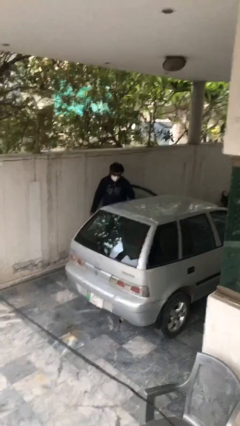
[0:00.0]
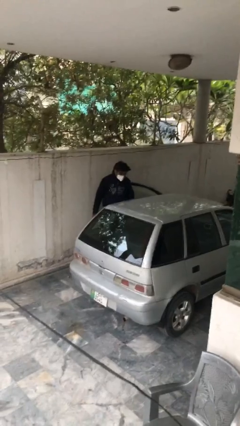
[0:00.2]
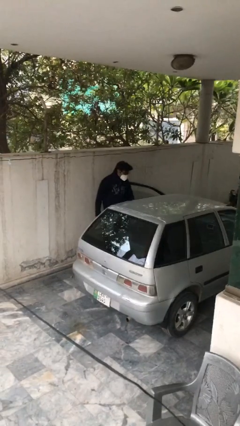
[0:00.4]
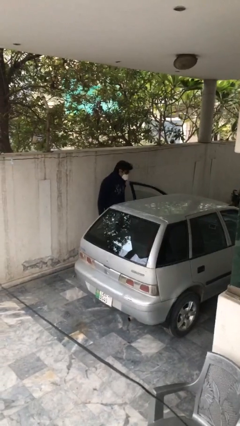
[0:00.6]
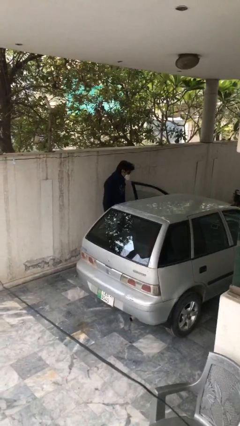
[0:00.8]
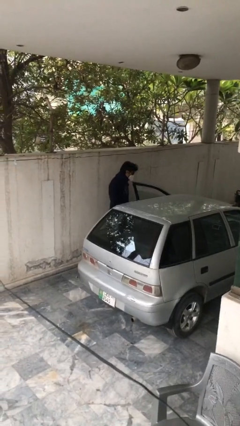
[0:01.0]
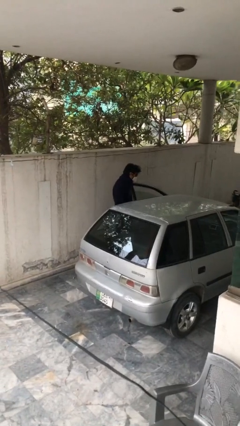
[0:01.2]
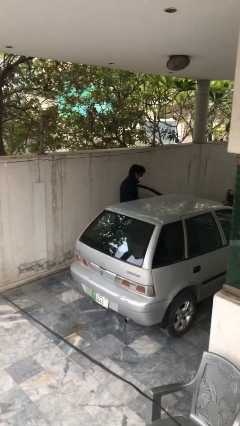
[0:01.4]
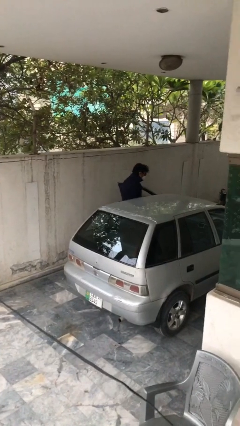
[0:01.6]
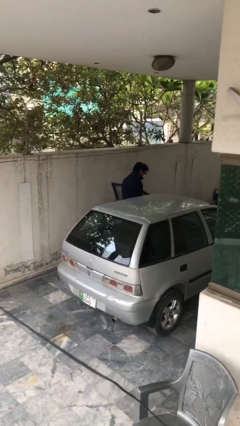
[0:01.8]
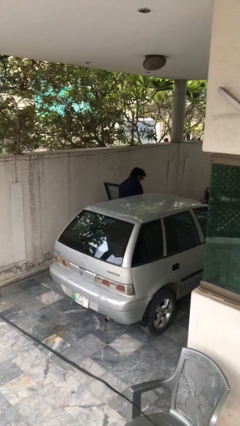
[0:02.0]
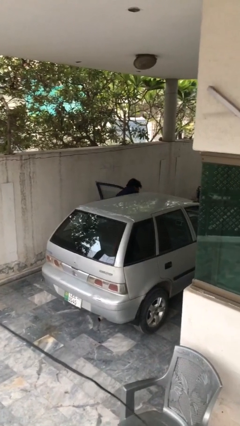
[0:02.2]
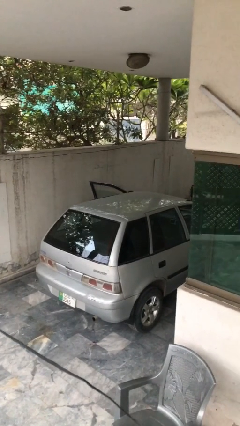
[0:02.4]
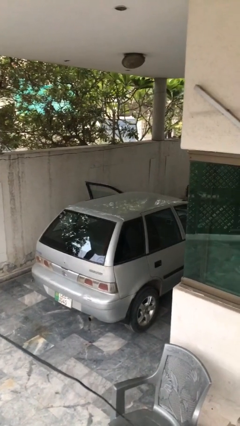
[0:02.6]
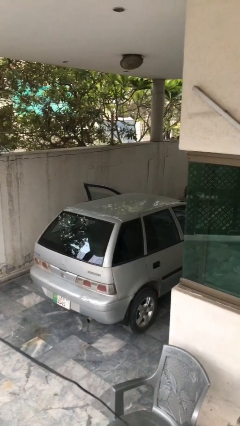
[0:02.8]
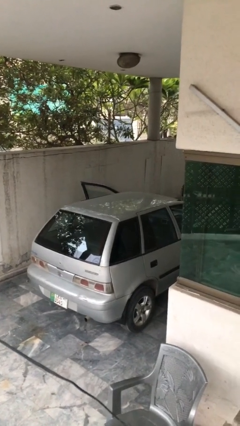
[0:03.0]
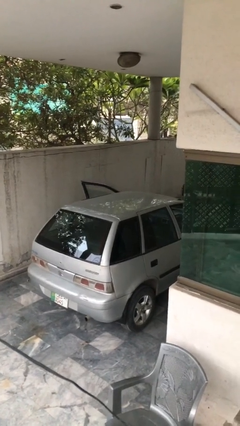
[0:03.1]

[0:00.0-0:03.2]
person enters car

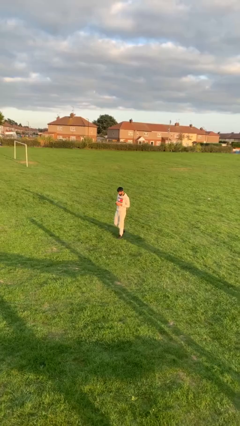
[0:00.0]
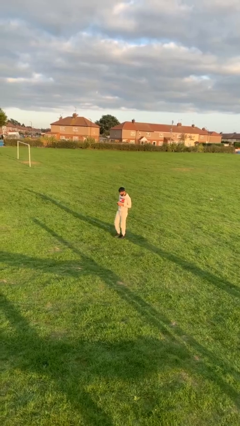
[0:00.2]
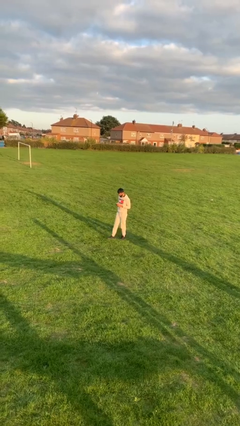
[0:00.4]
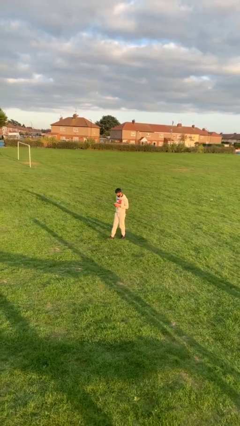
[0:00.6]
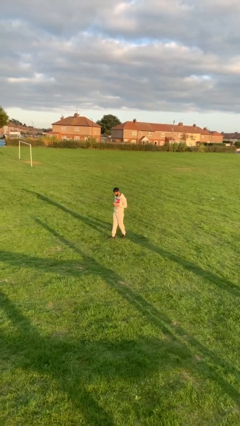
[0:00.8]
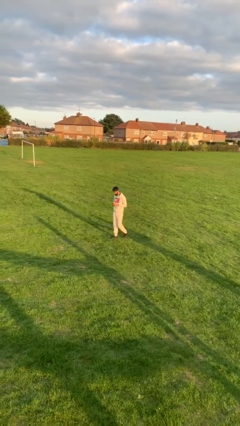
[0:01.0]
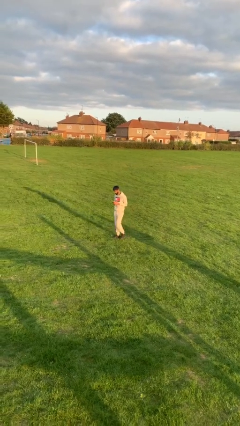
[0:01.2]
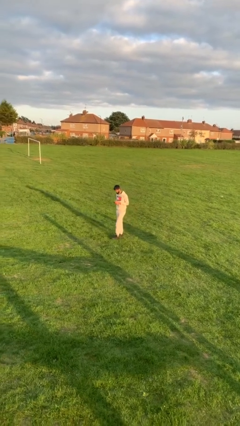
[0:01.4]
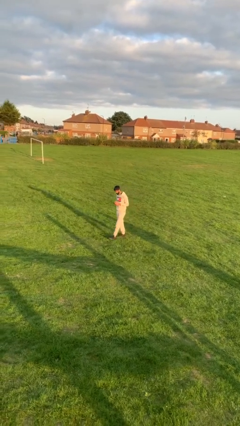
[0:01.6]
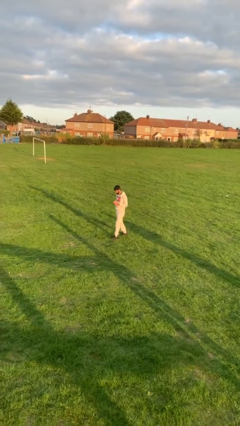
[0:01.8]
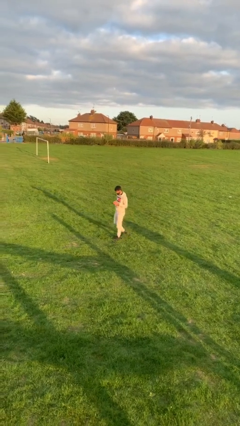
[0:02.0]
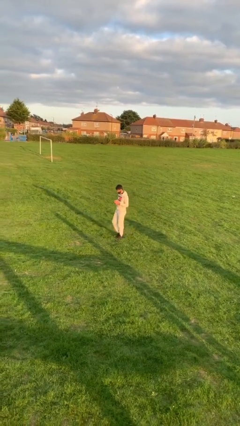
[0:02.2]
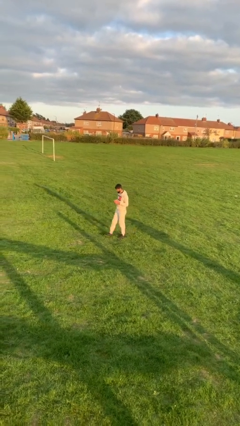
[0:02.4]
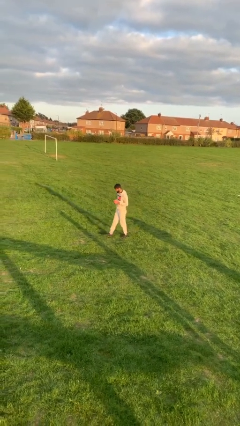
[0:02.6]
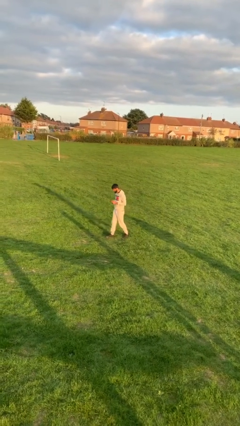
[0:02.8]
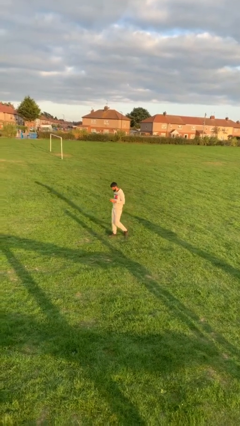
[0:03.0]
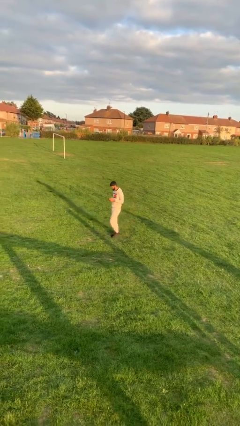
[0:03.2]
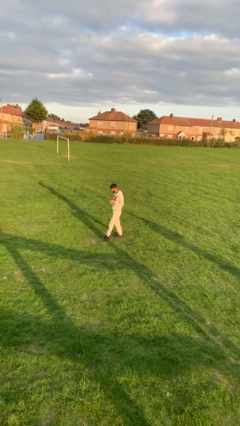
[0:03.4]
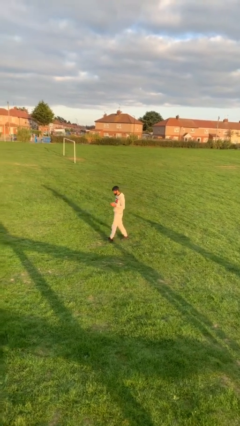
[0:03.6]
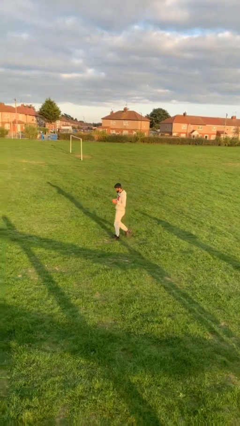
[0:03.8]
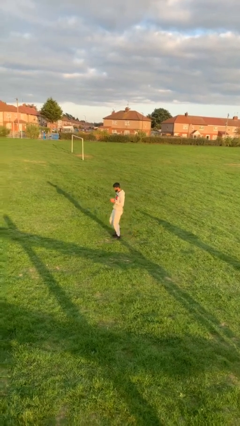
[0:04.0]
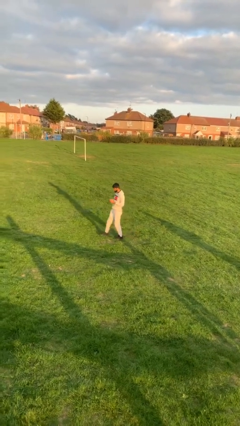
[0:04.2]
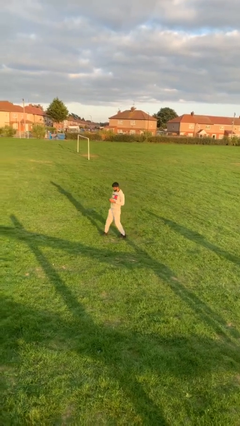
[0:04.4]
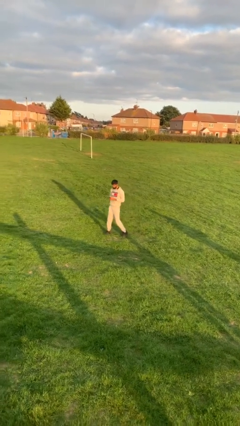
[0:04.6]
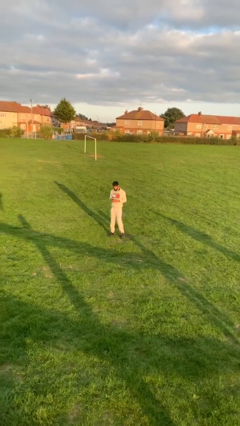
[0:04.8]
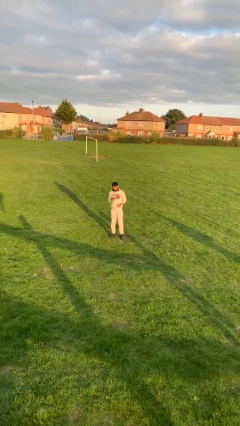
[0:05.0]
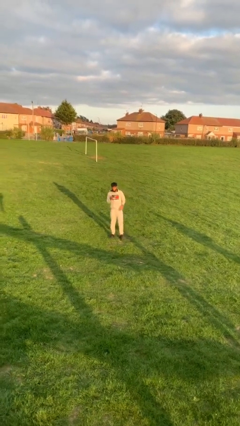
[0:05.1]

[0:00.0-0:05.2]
person texts on phone

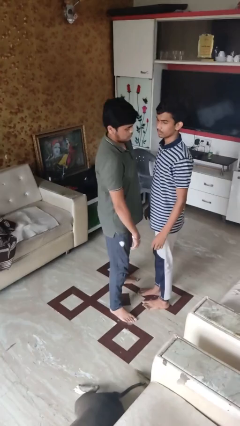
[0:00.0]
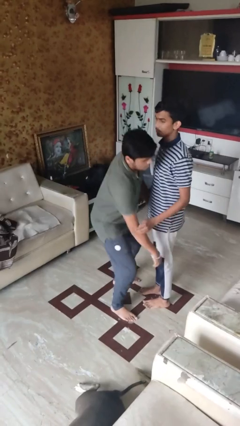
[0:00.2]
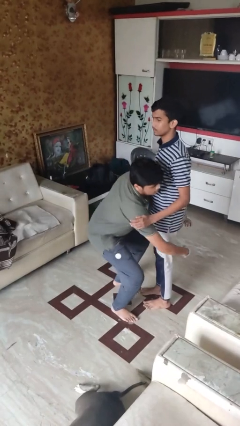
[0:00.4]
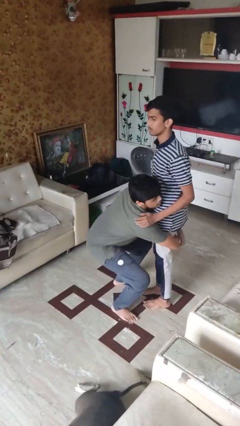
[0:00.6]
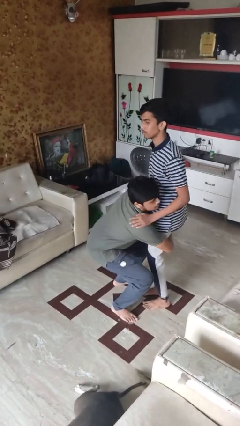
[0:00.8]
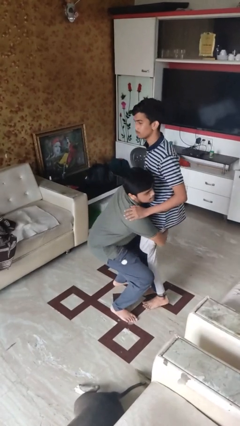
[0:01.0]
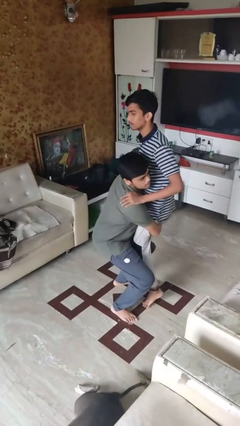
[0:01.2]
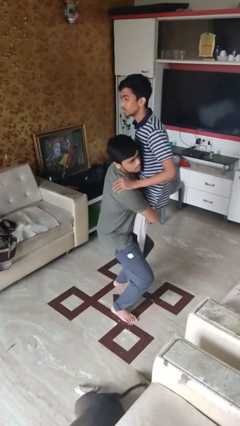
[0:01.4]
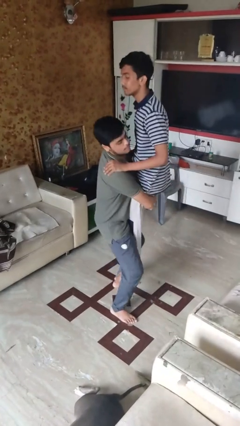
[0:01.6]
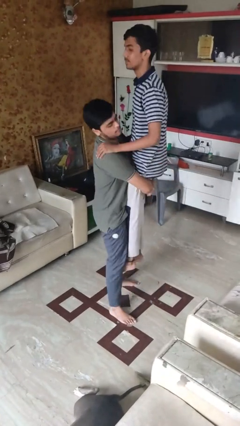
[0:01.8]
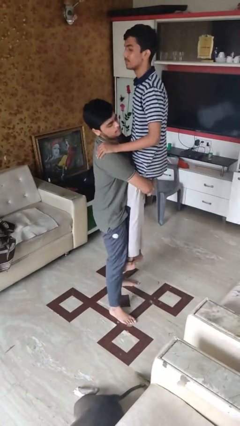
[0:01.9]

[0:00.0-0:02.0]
person picks up person

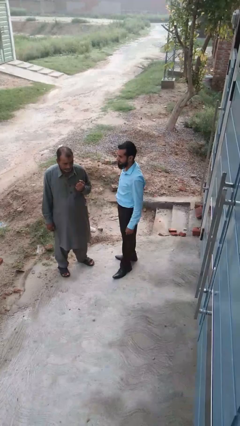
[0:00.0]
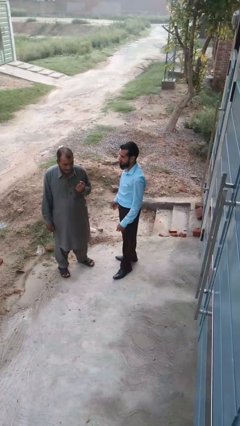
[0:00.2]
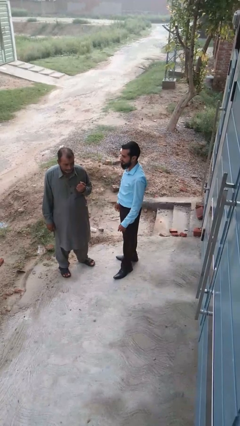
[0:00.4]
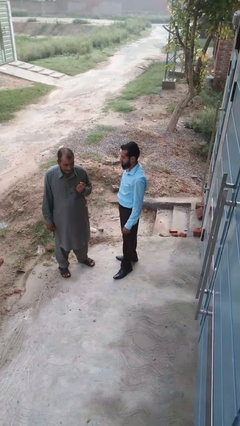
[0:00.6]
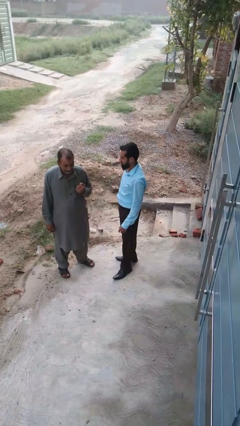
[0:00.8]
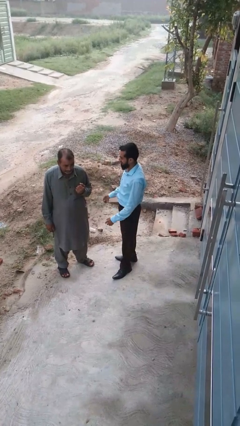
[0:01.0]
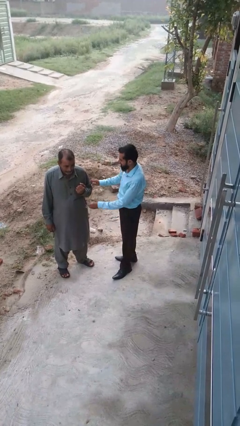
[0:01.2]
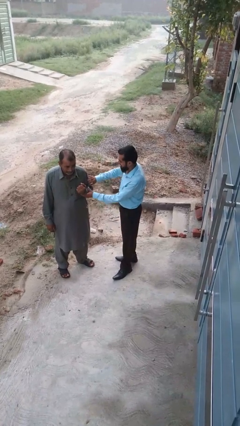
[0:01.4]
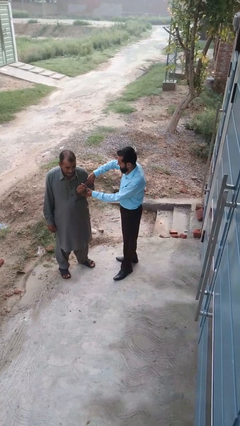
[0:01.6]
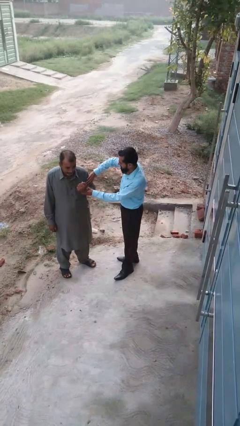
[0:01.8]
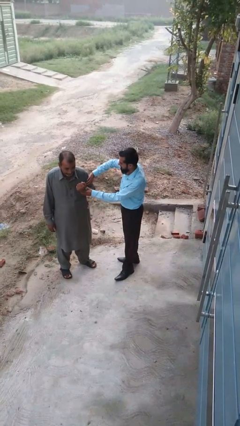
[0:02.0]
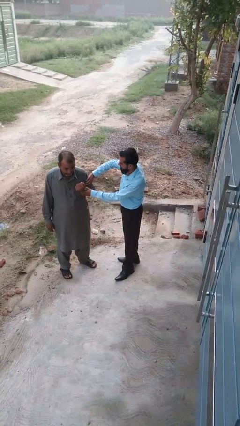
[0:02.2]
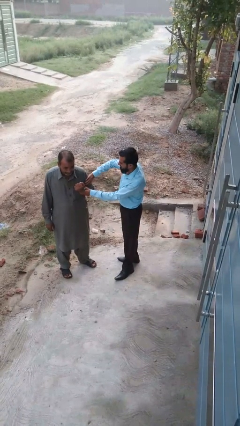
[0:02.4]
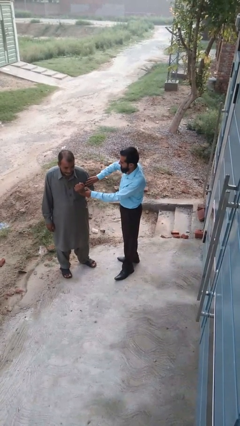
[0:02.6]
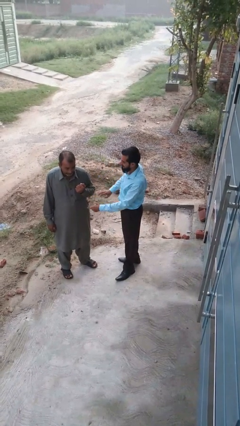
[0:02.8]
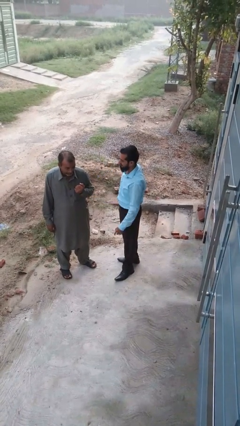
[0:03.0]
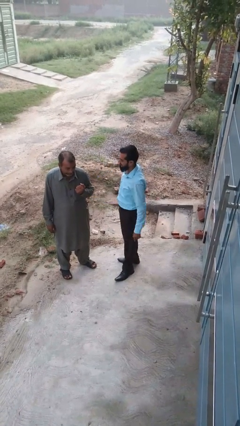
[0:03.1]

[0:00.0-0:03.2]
person grabs person by bicep

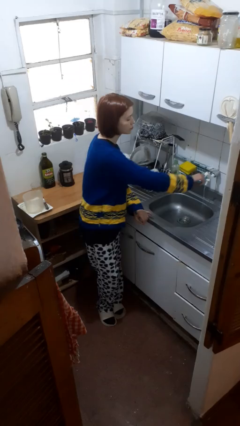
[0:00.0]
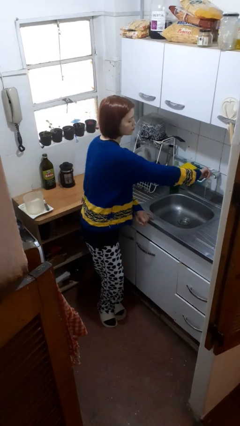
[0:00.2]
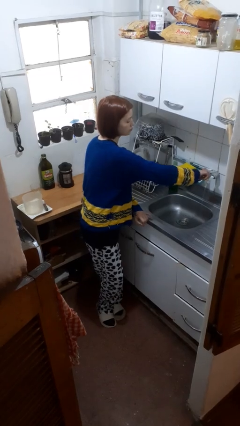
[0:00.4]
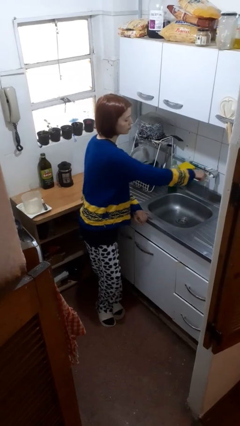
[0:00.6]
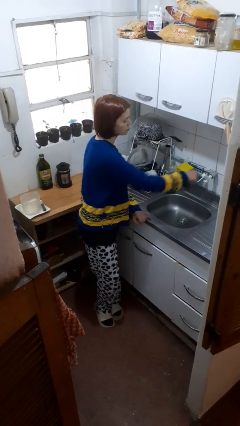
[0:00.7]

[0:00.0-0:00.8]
person turns off faucet

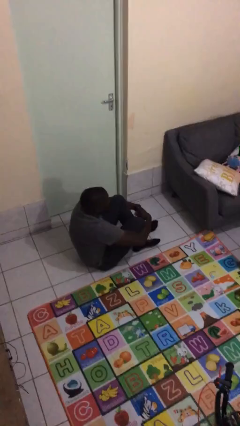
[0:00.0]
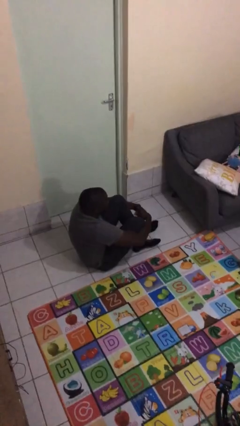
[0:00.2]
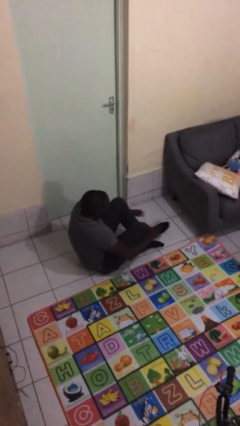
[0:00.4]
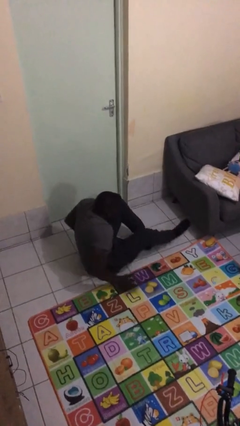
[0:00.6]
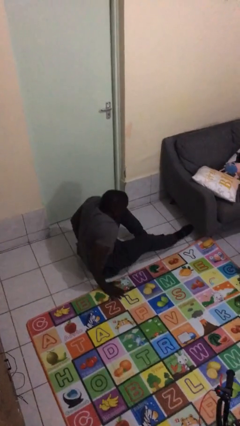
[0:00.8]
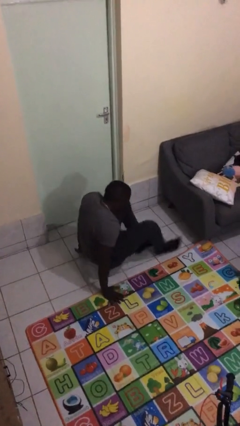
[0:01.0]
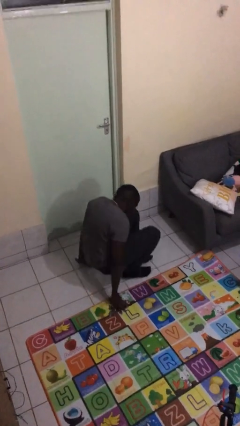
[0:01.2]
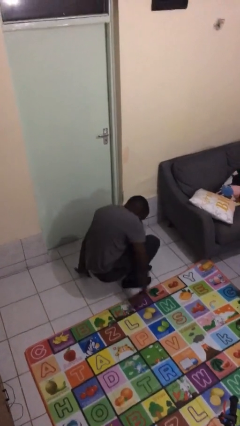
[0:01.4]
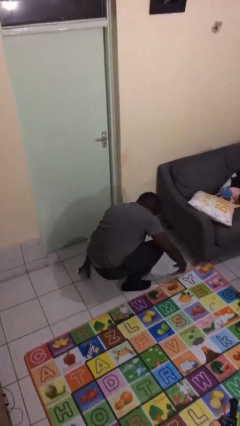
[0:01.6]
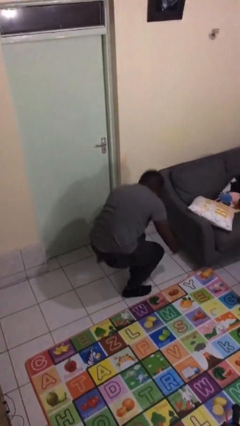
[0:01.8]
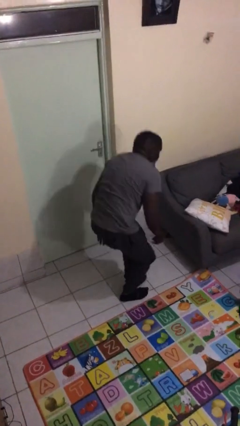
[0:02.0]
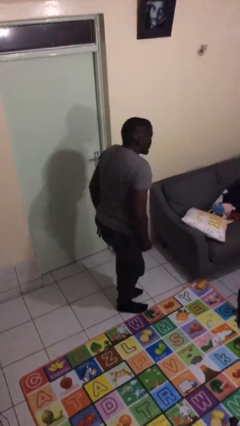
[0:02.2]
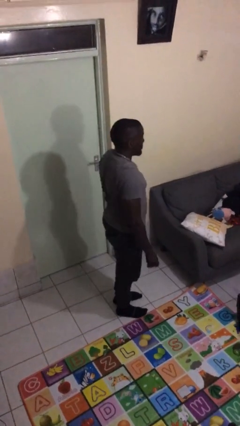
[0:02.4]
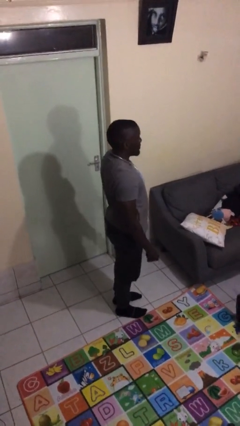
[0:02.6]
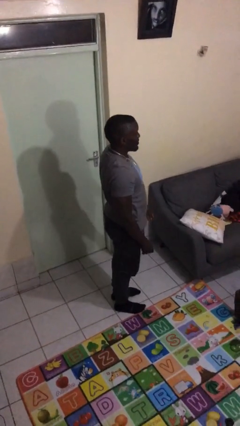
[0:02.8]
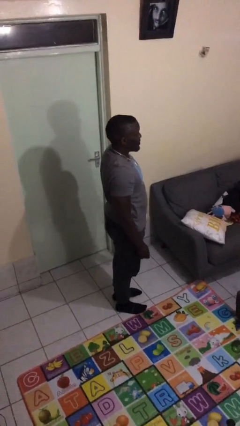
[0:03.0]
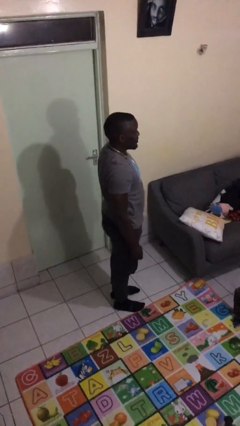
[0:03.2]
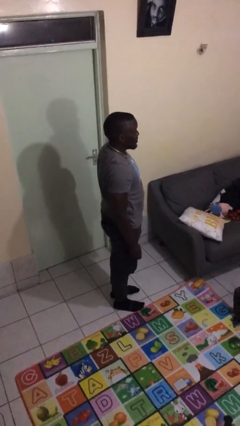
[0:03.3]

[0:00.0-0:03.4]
person stands up from floor
